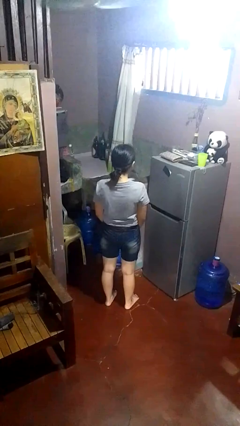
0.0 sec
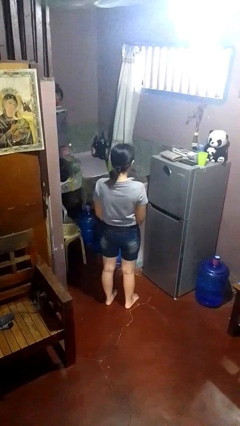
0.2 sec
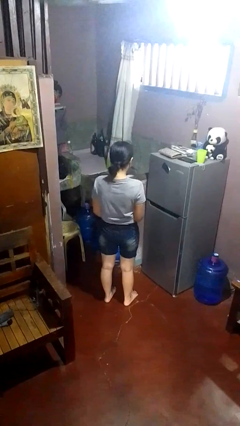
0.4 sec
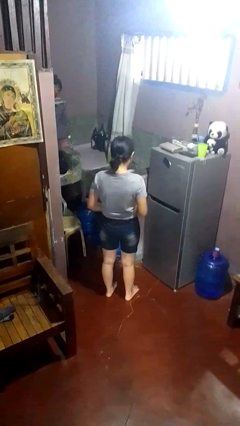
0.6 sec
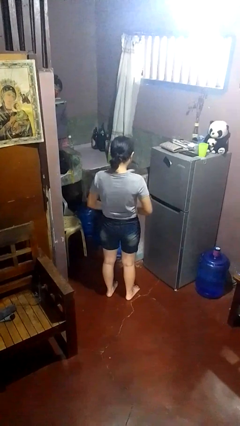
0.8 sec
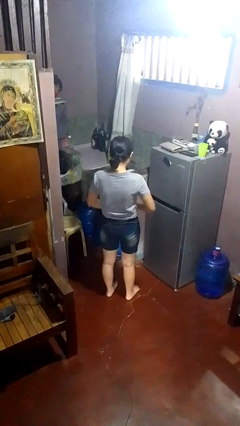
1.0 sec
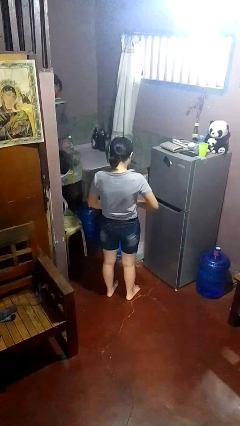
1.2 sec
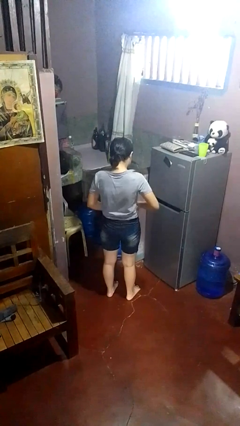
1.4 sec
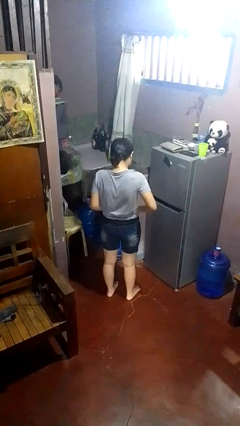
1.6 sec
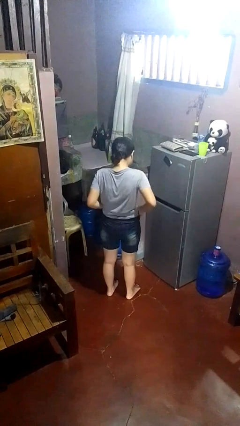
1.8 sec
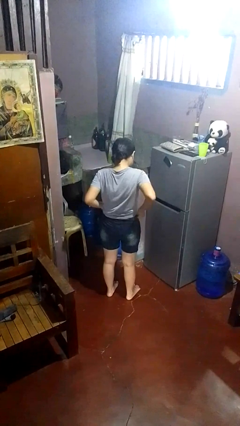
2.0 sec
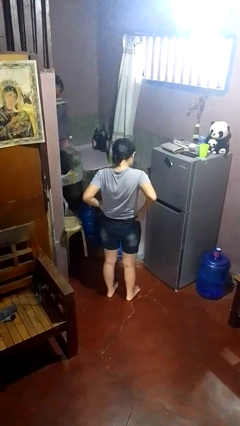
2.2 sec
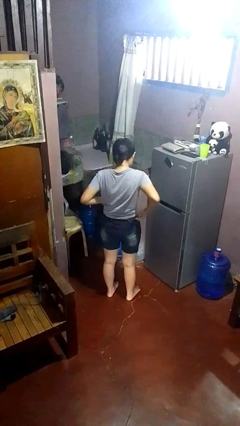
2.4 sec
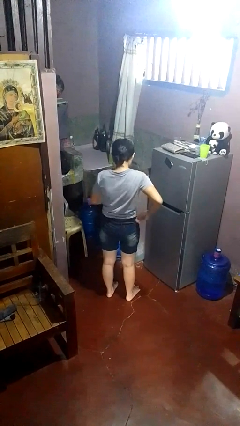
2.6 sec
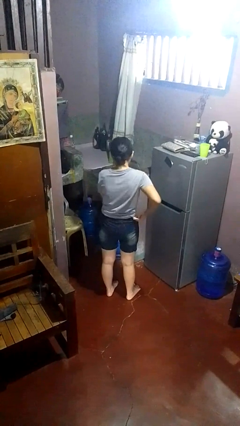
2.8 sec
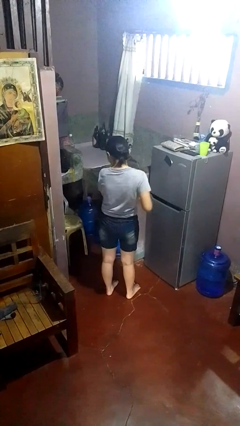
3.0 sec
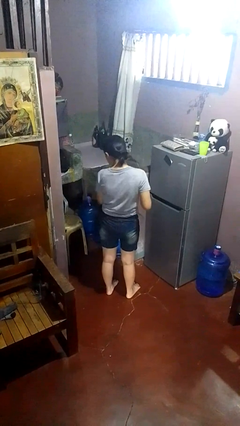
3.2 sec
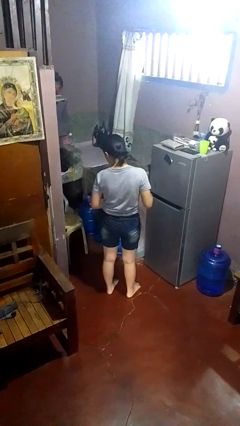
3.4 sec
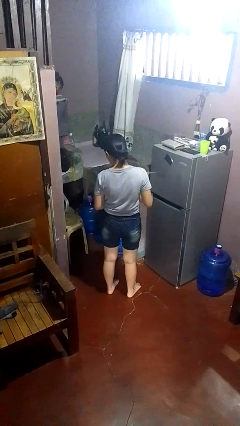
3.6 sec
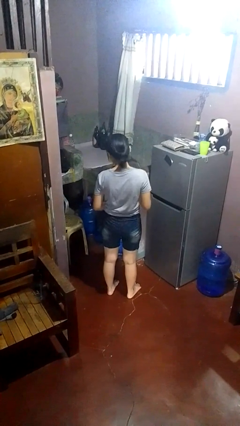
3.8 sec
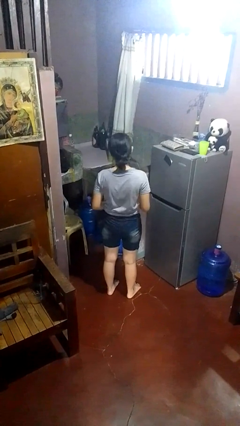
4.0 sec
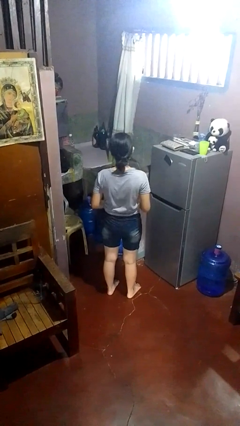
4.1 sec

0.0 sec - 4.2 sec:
person takes off belt

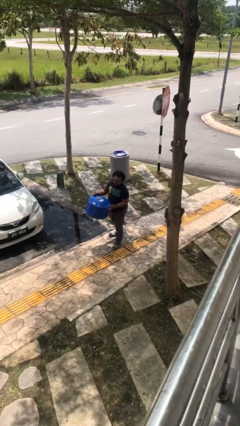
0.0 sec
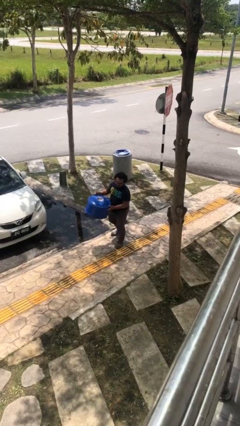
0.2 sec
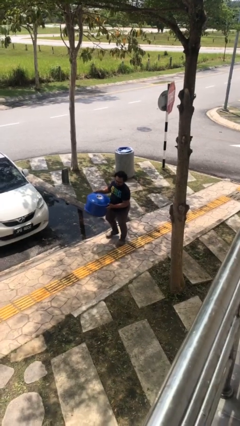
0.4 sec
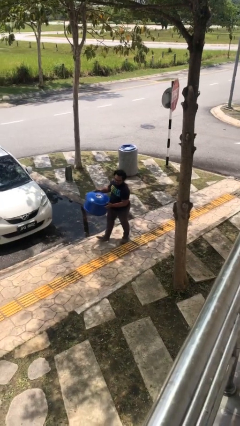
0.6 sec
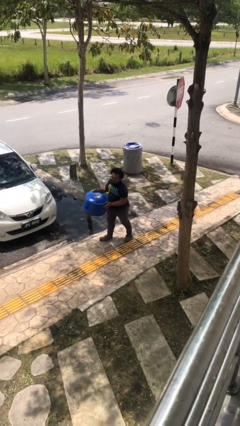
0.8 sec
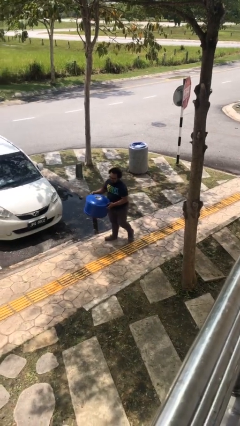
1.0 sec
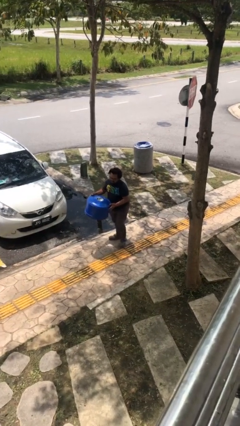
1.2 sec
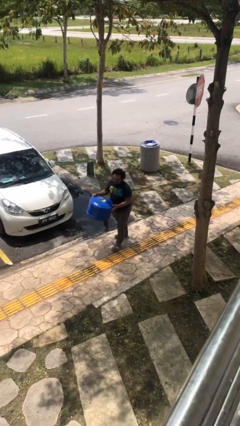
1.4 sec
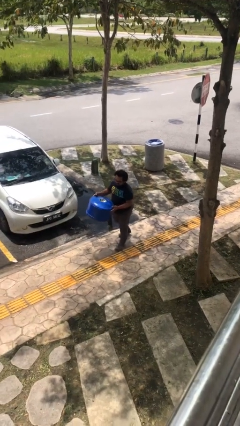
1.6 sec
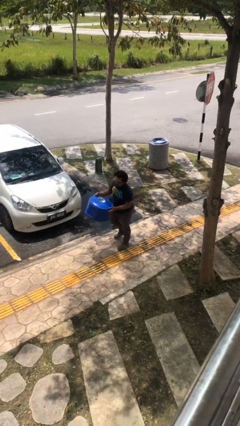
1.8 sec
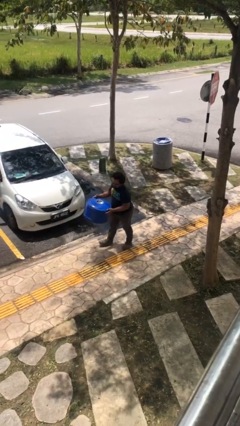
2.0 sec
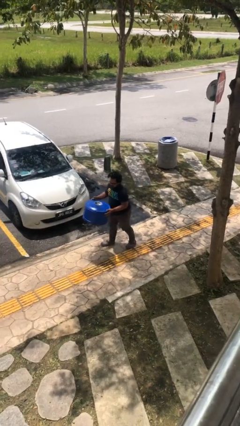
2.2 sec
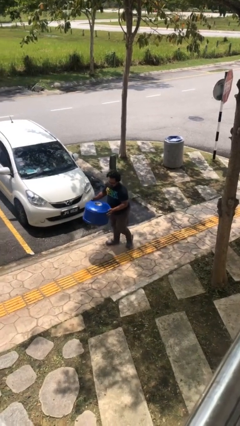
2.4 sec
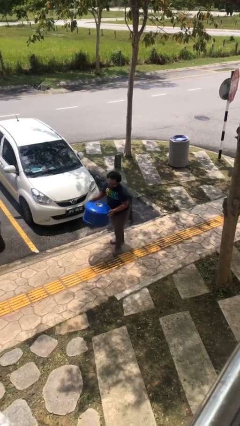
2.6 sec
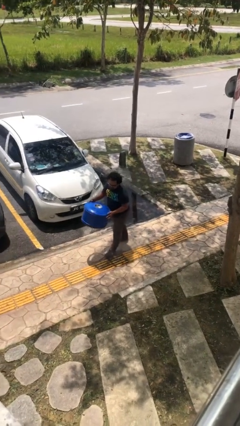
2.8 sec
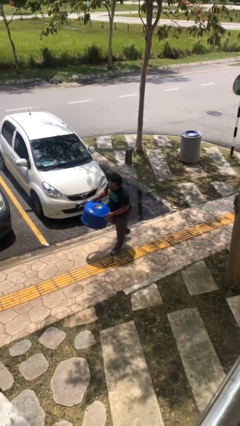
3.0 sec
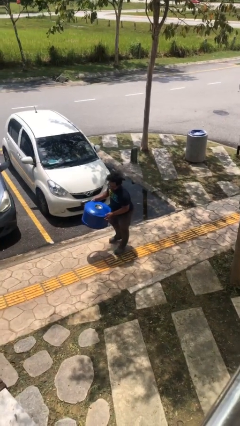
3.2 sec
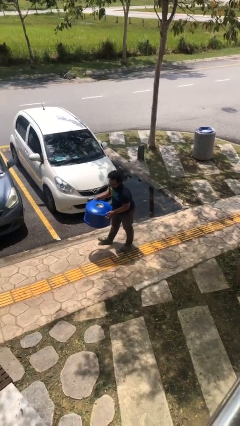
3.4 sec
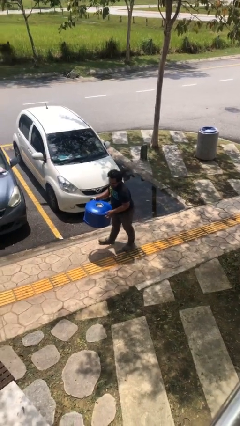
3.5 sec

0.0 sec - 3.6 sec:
person carries heavy object

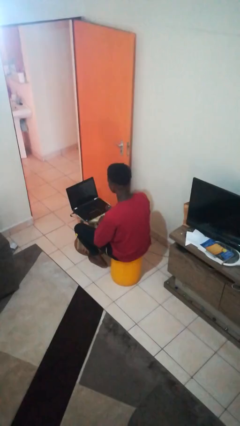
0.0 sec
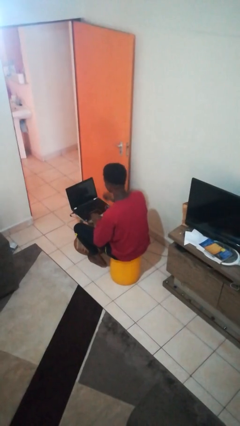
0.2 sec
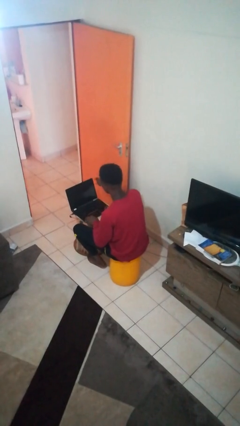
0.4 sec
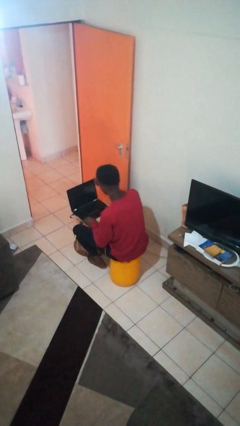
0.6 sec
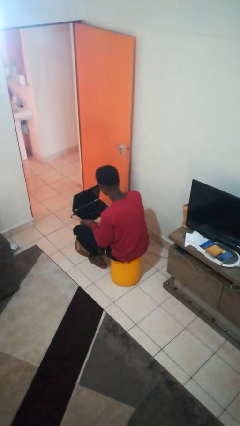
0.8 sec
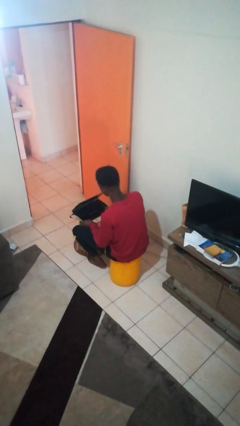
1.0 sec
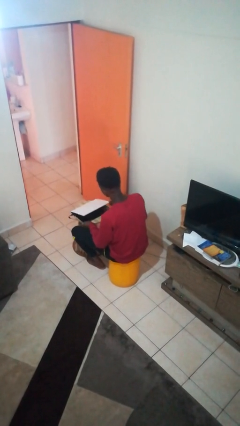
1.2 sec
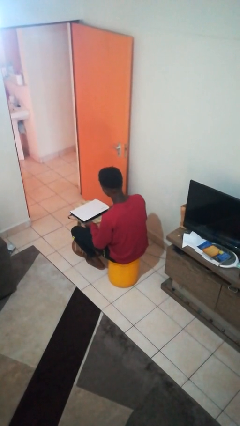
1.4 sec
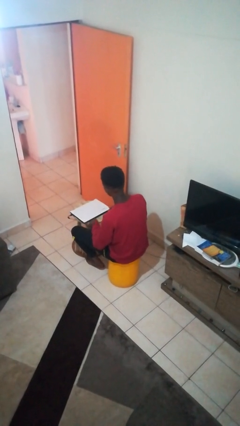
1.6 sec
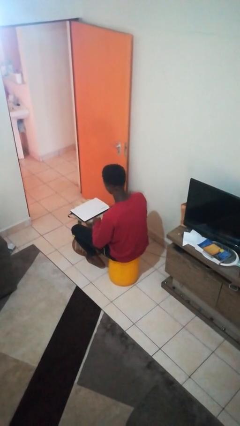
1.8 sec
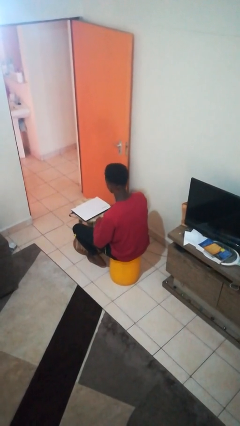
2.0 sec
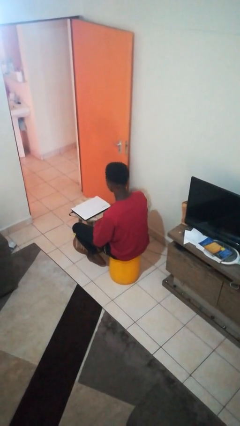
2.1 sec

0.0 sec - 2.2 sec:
person closes laptop

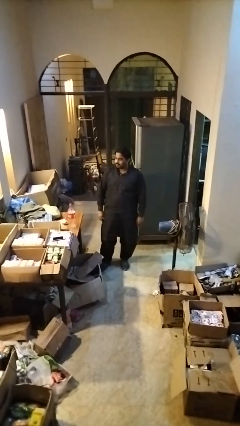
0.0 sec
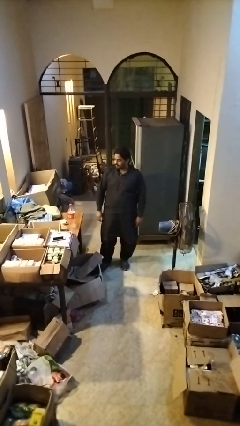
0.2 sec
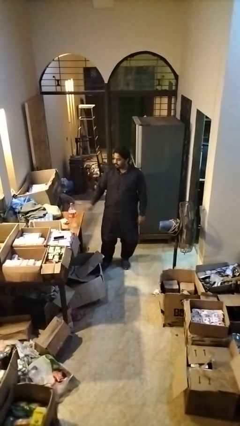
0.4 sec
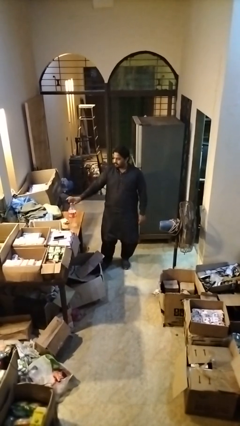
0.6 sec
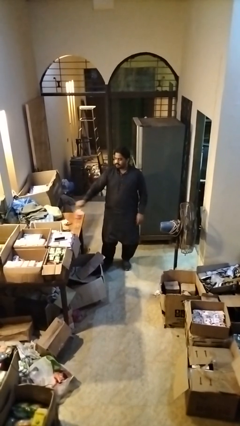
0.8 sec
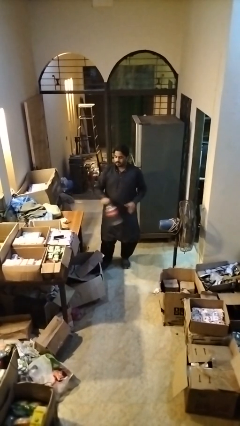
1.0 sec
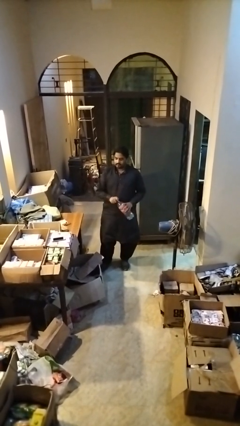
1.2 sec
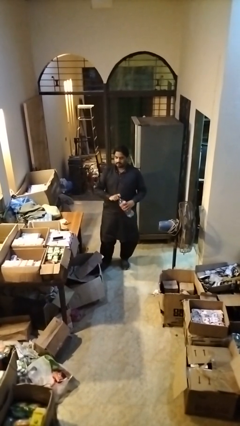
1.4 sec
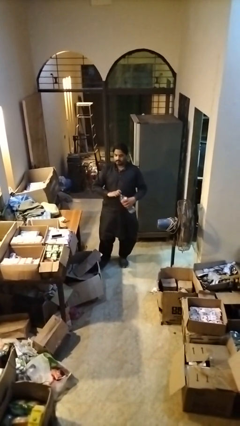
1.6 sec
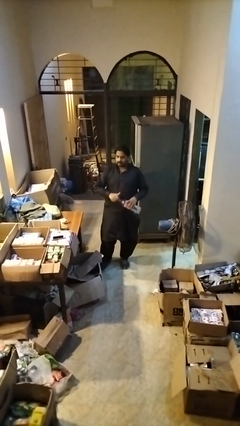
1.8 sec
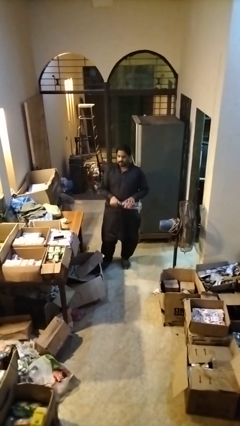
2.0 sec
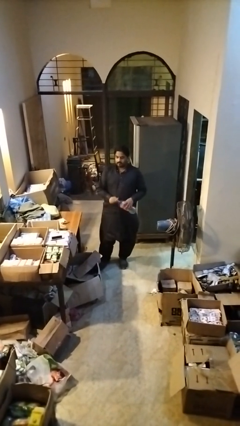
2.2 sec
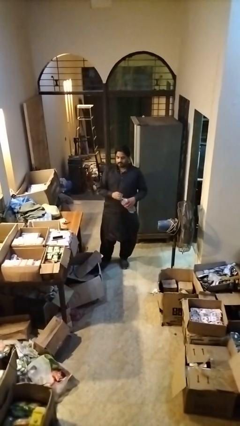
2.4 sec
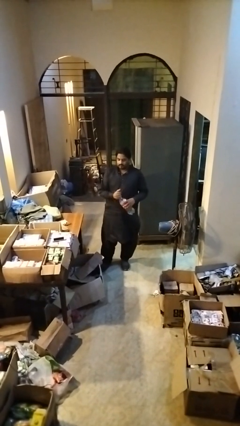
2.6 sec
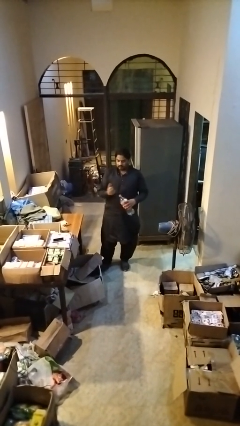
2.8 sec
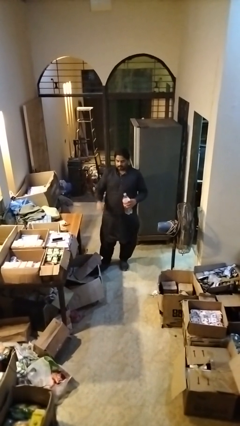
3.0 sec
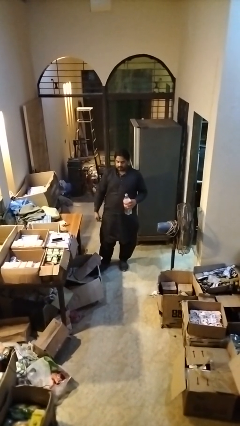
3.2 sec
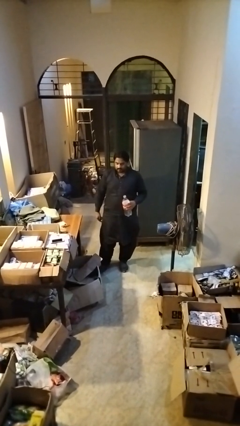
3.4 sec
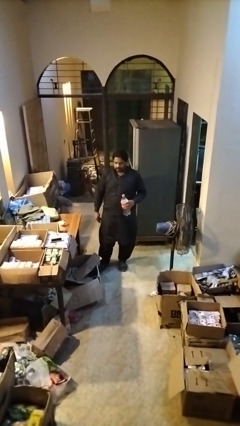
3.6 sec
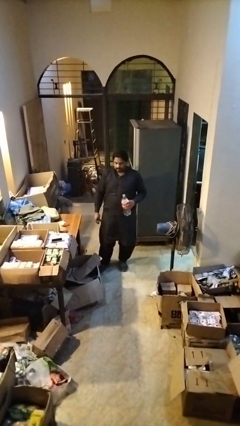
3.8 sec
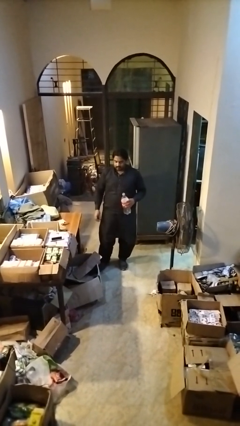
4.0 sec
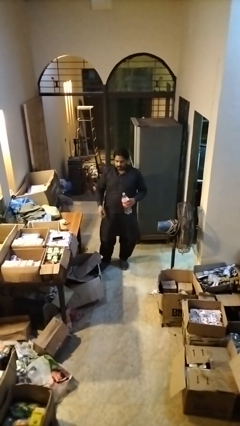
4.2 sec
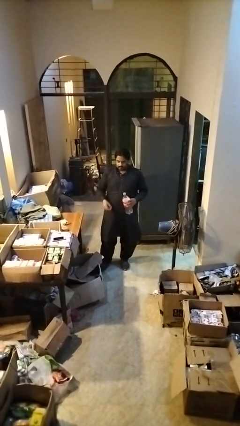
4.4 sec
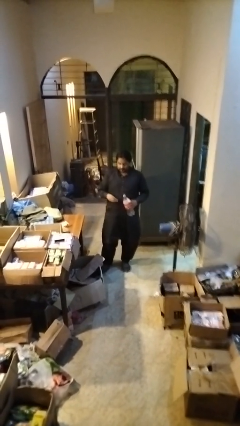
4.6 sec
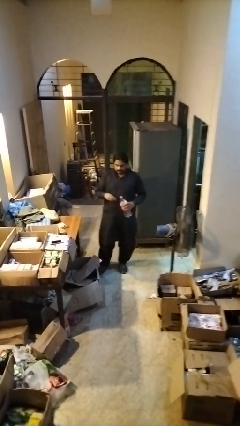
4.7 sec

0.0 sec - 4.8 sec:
person unscrews lid from bottle

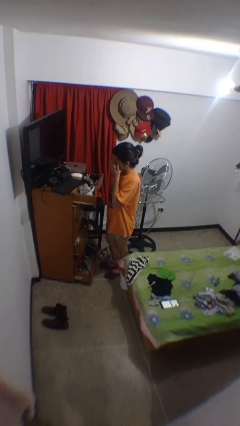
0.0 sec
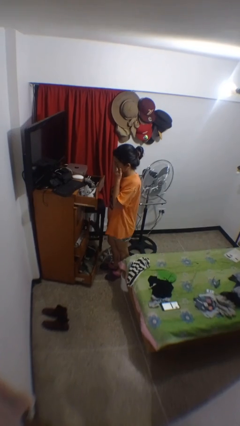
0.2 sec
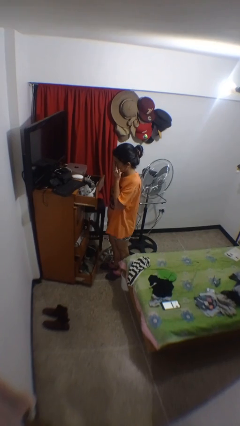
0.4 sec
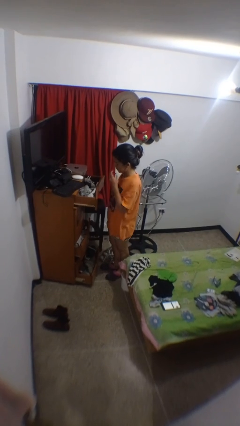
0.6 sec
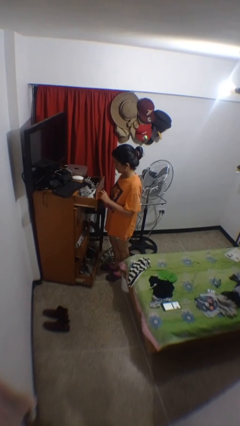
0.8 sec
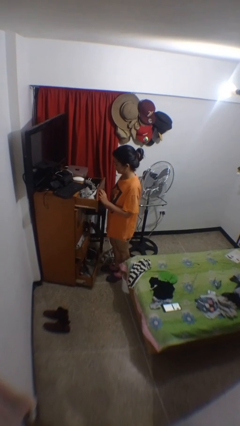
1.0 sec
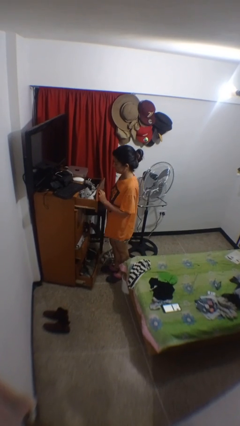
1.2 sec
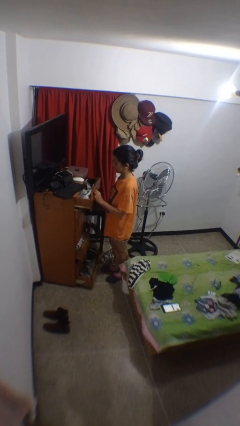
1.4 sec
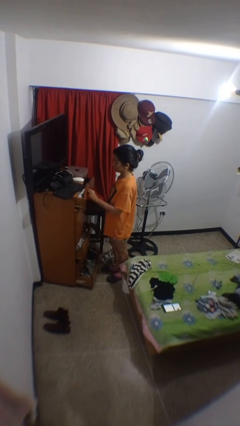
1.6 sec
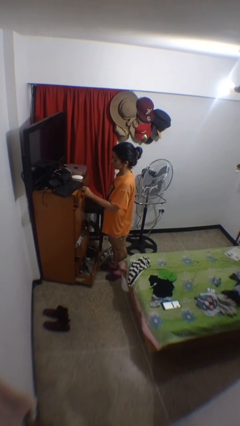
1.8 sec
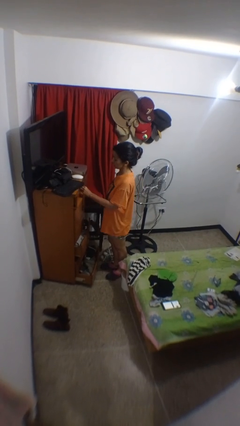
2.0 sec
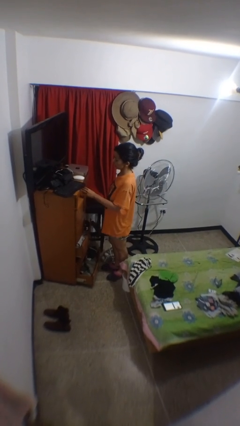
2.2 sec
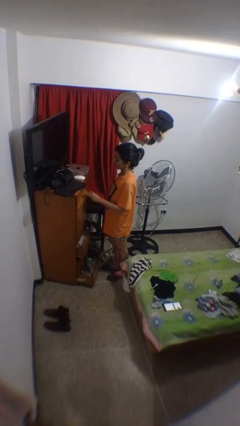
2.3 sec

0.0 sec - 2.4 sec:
person closes dresser drawer

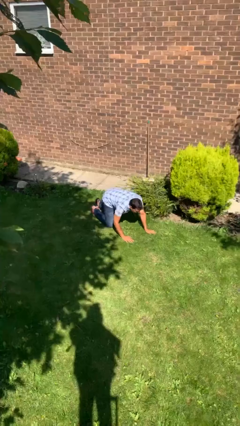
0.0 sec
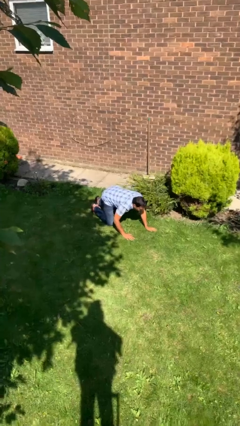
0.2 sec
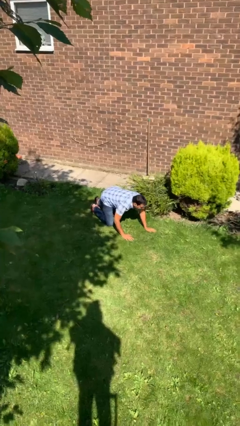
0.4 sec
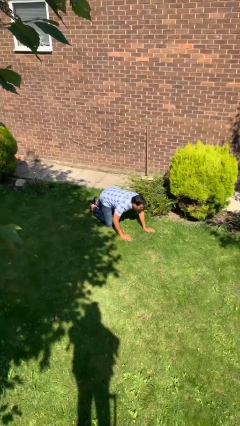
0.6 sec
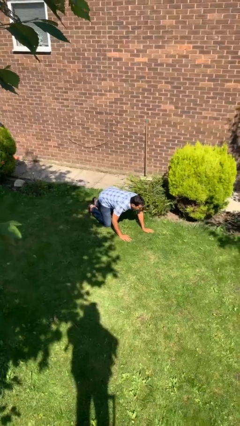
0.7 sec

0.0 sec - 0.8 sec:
person crawls
